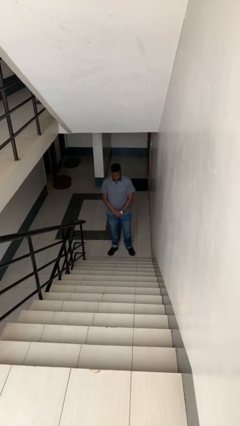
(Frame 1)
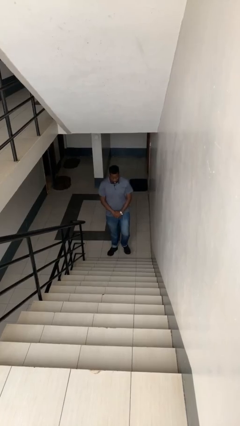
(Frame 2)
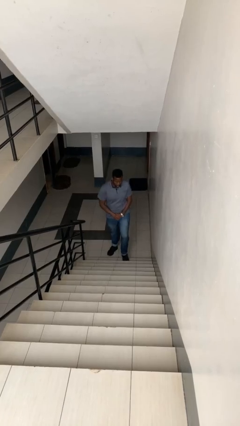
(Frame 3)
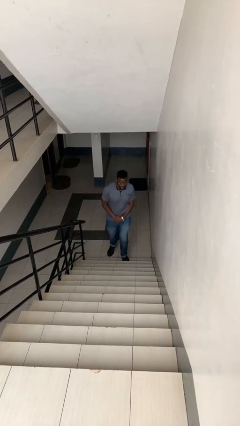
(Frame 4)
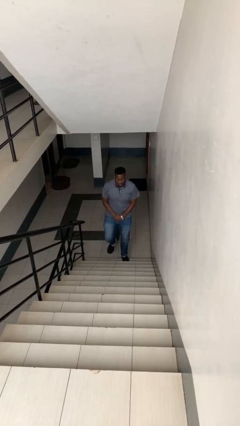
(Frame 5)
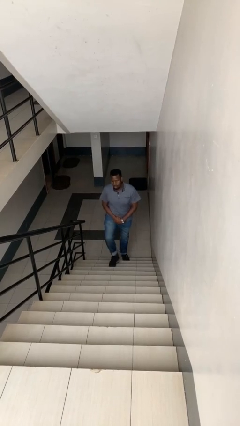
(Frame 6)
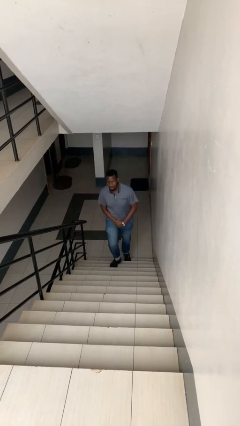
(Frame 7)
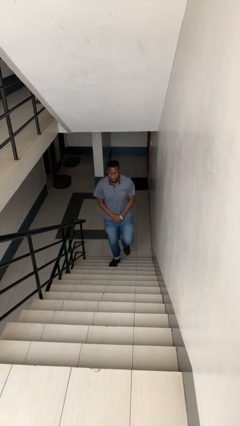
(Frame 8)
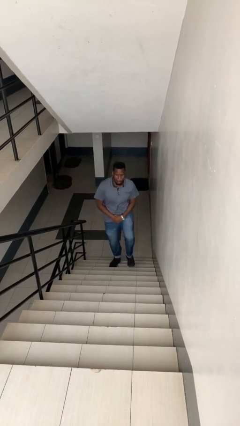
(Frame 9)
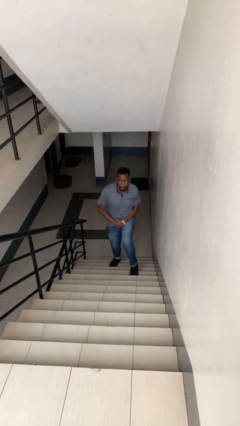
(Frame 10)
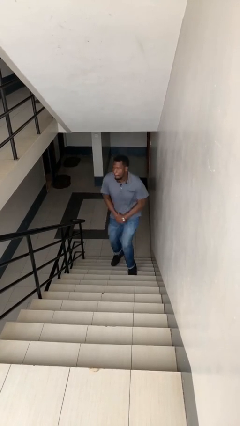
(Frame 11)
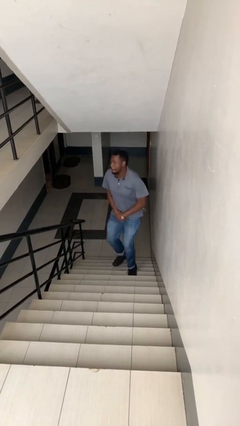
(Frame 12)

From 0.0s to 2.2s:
person climbs up stairs

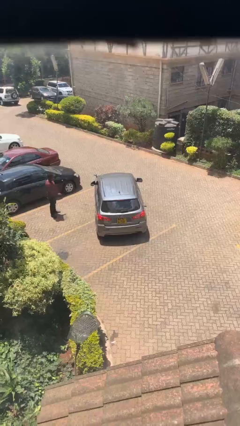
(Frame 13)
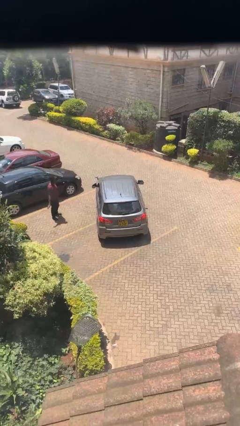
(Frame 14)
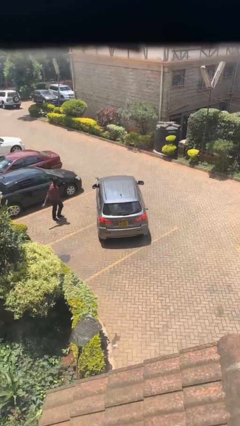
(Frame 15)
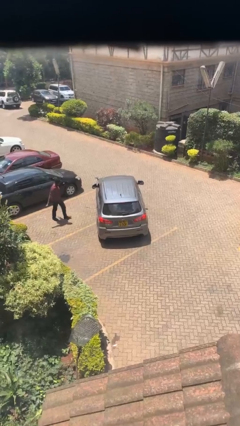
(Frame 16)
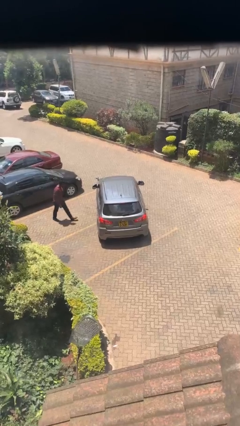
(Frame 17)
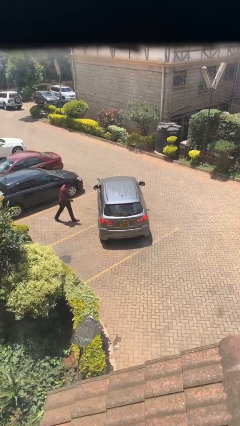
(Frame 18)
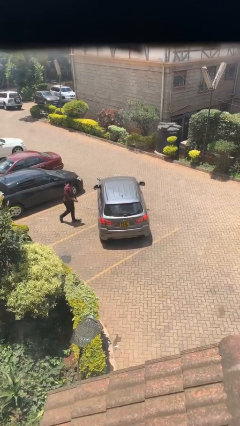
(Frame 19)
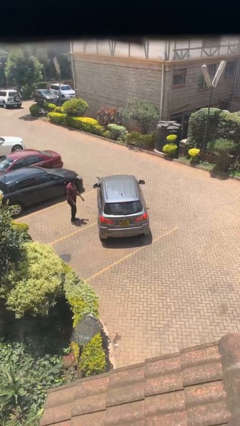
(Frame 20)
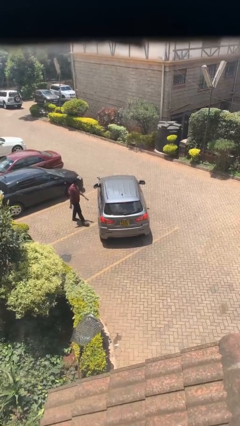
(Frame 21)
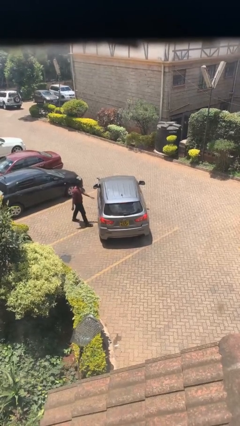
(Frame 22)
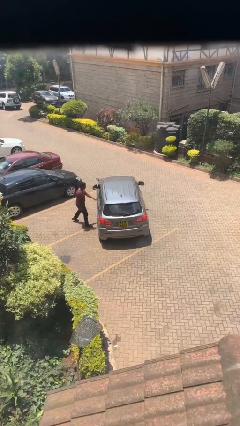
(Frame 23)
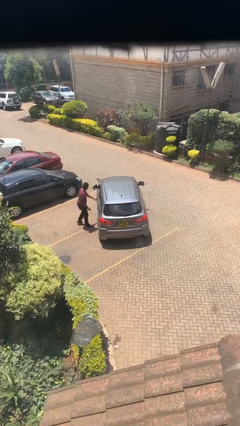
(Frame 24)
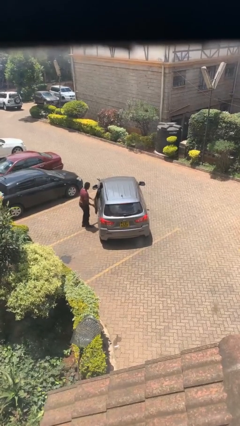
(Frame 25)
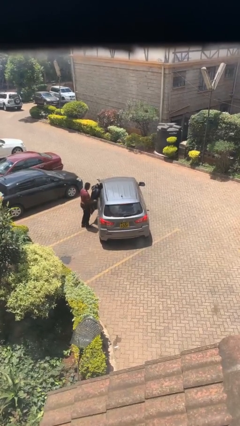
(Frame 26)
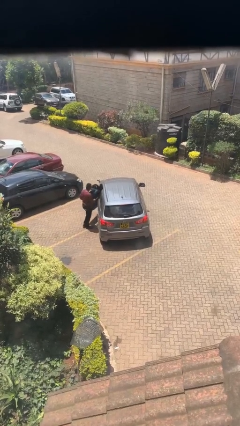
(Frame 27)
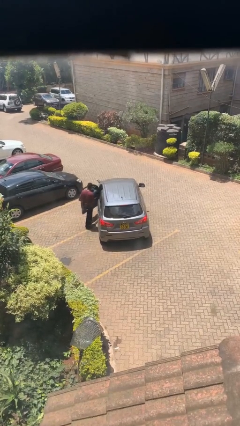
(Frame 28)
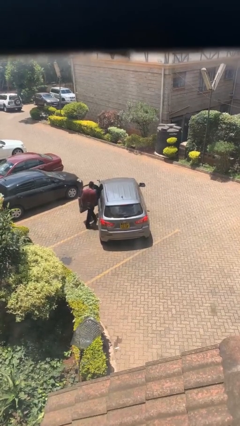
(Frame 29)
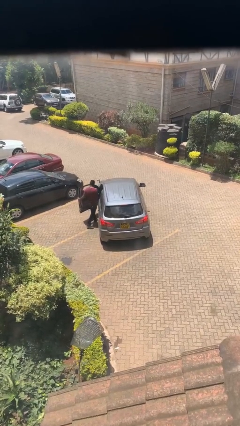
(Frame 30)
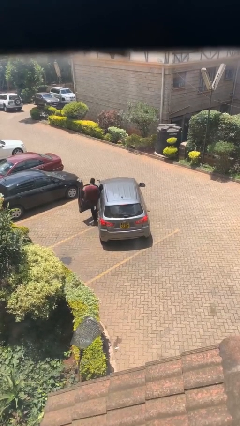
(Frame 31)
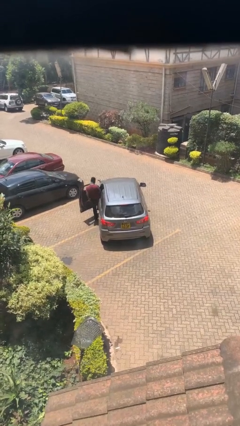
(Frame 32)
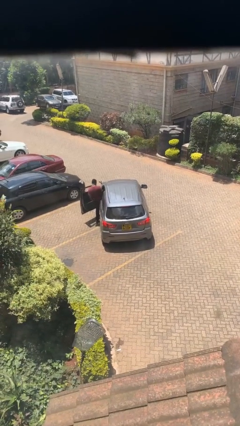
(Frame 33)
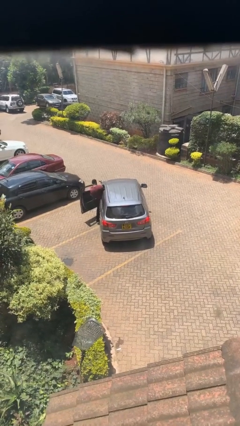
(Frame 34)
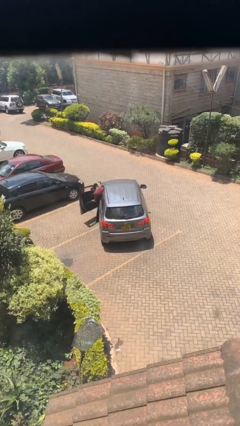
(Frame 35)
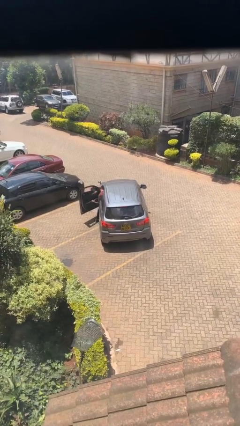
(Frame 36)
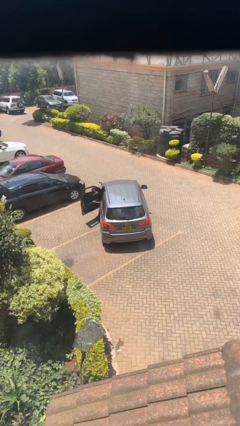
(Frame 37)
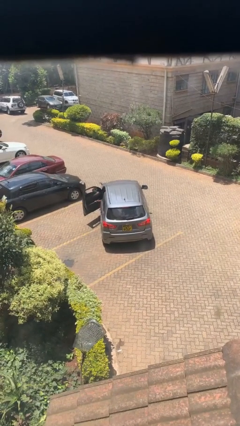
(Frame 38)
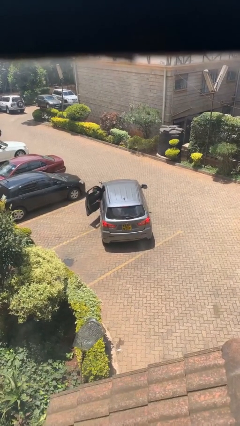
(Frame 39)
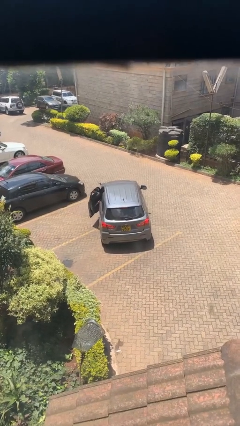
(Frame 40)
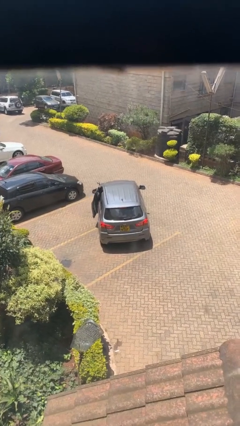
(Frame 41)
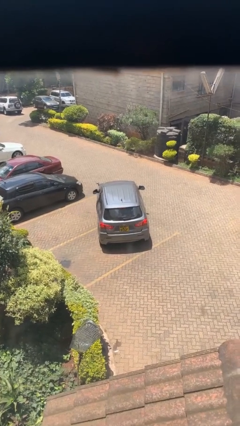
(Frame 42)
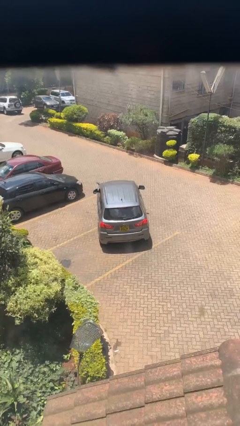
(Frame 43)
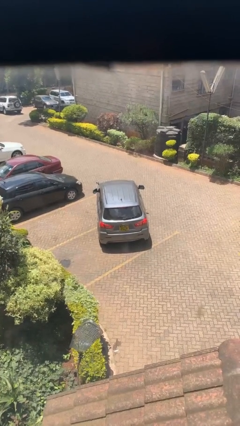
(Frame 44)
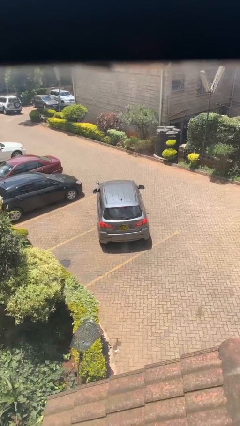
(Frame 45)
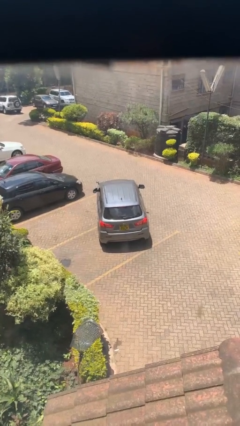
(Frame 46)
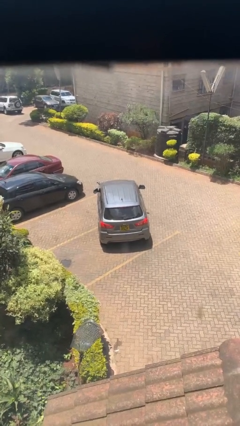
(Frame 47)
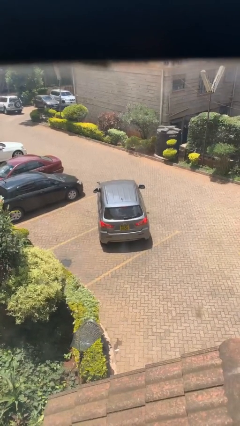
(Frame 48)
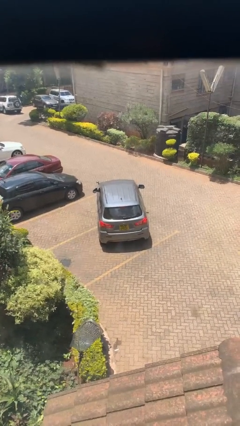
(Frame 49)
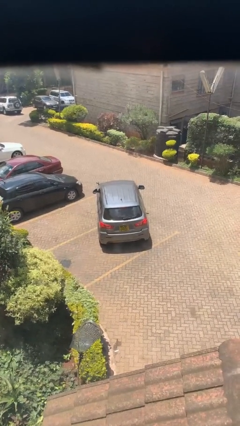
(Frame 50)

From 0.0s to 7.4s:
car picks up person

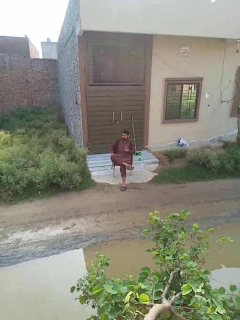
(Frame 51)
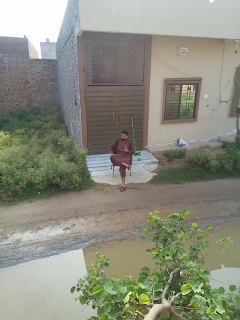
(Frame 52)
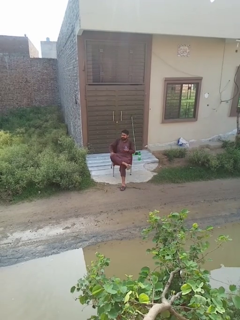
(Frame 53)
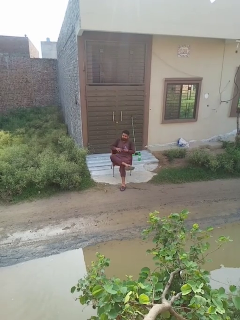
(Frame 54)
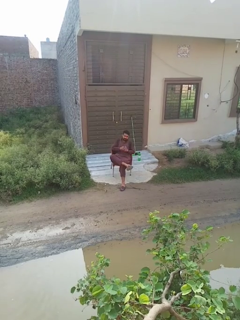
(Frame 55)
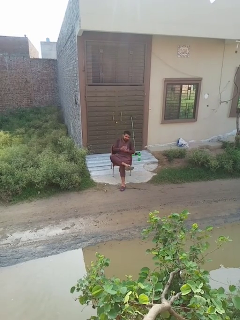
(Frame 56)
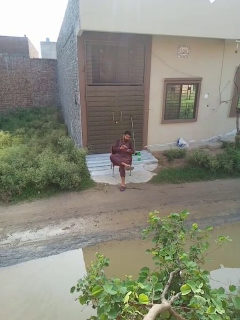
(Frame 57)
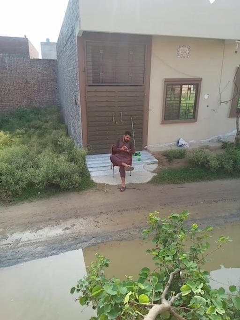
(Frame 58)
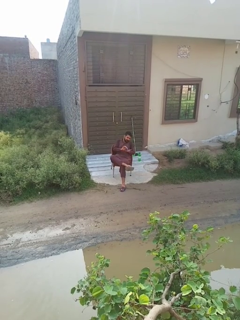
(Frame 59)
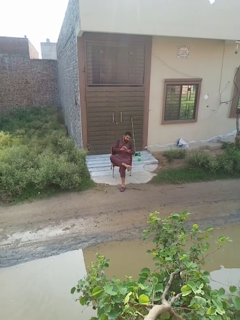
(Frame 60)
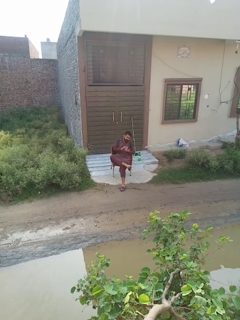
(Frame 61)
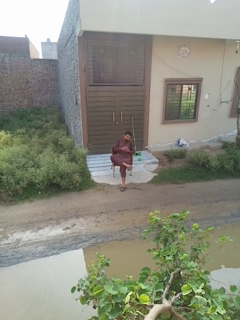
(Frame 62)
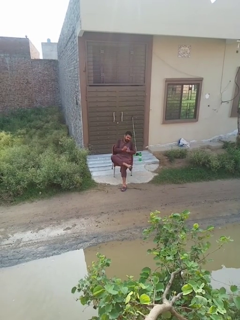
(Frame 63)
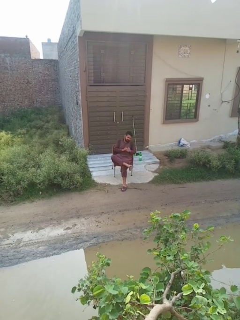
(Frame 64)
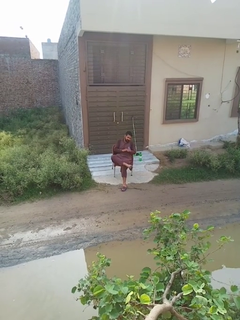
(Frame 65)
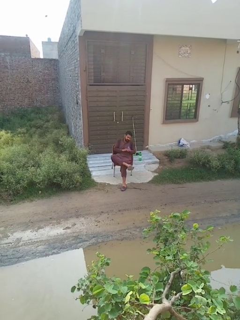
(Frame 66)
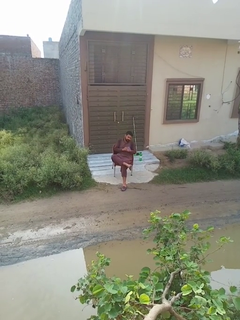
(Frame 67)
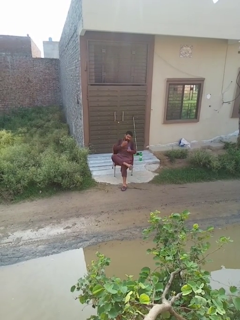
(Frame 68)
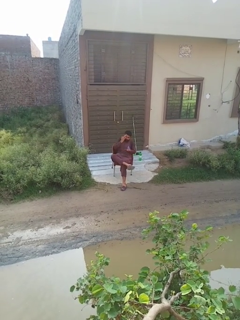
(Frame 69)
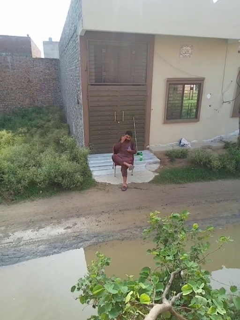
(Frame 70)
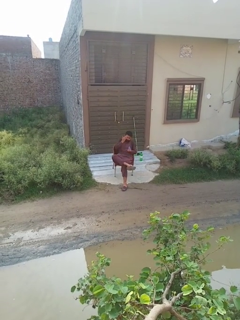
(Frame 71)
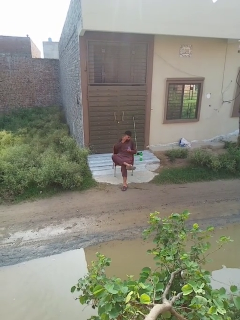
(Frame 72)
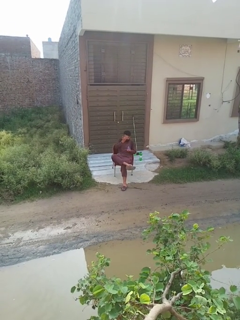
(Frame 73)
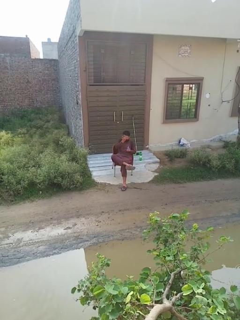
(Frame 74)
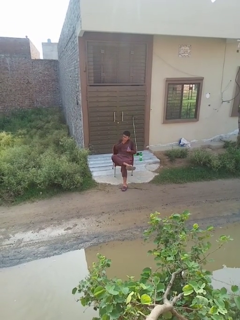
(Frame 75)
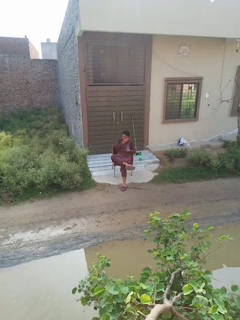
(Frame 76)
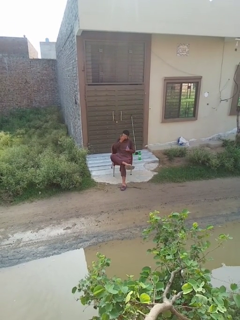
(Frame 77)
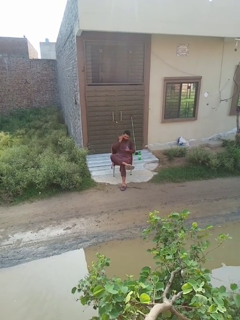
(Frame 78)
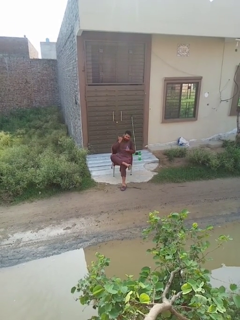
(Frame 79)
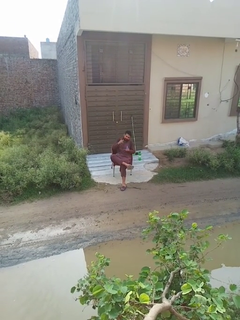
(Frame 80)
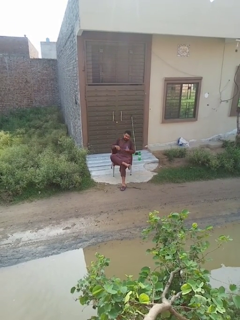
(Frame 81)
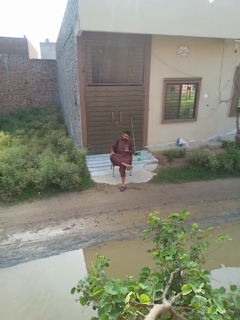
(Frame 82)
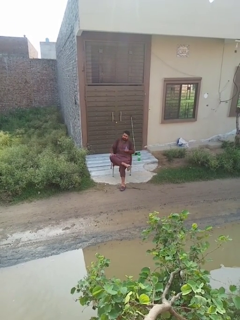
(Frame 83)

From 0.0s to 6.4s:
person applies facial moisturizer

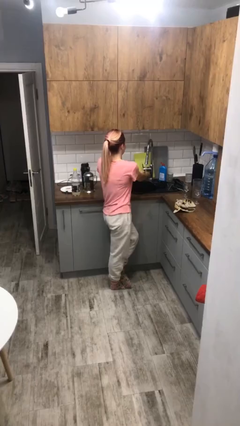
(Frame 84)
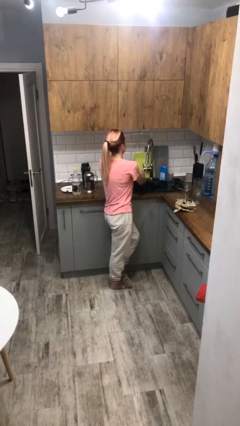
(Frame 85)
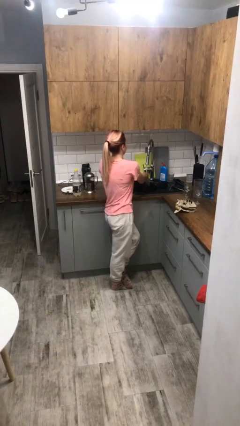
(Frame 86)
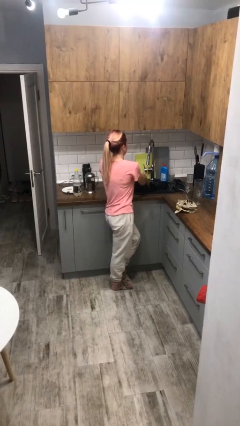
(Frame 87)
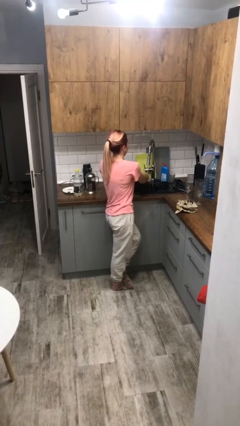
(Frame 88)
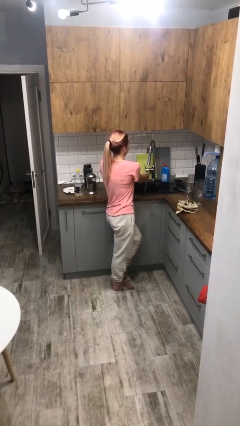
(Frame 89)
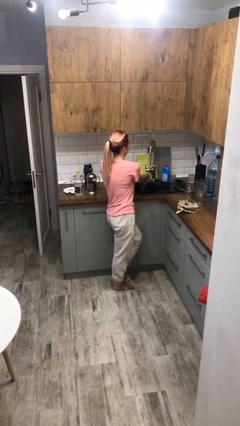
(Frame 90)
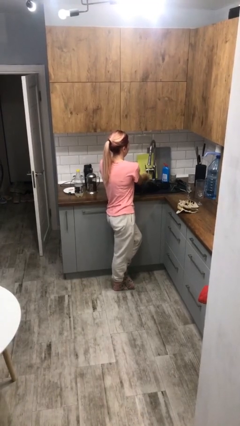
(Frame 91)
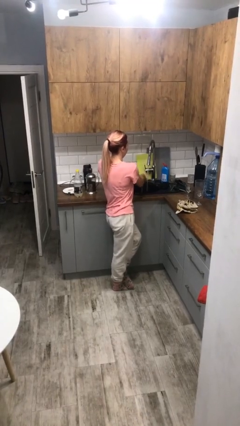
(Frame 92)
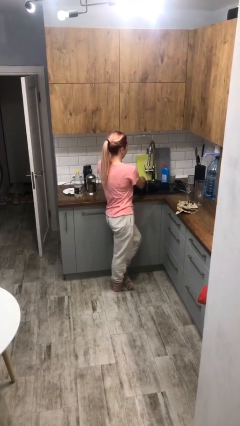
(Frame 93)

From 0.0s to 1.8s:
person washes hands

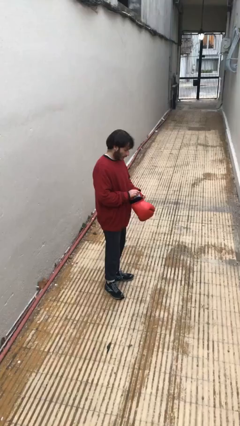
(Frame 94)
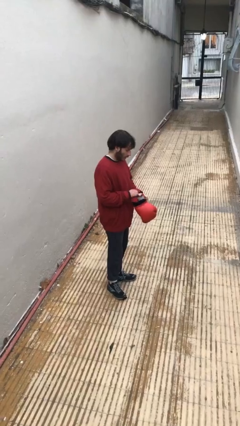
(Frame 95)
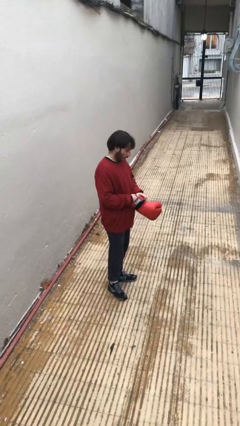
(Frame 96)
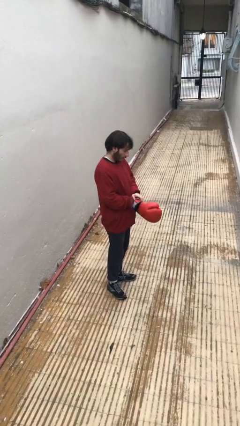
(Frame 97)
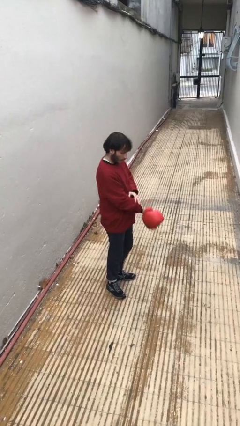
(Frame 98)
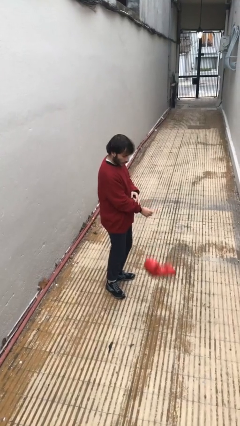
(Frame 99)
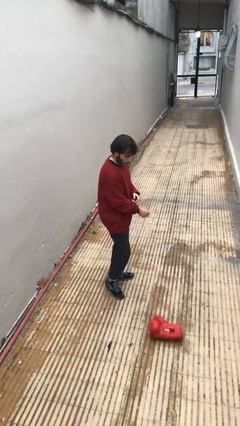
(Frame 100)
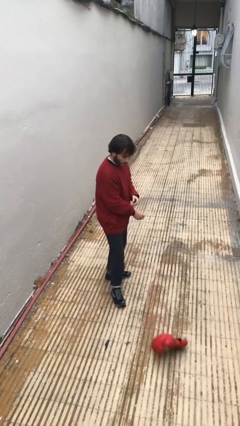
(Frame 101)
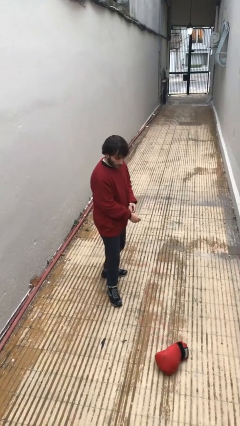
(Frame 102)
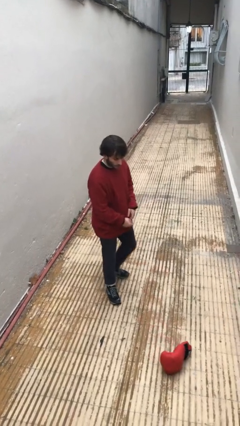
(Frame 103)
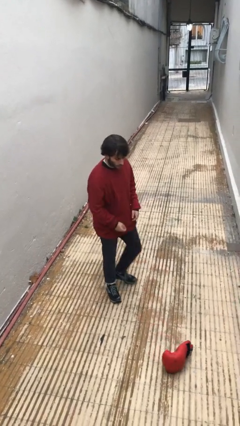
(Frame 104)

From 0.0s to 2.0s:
person drops object
